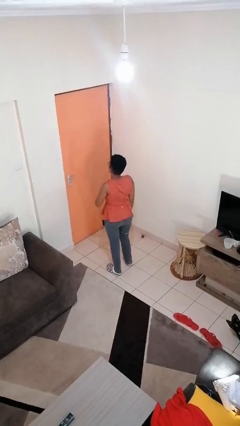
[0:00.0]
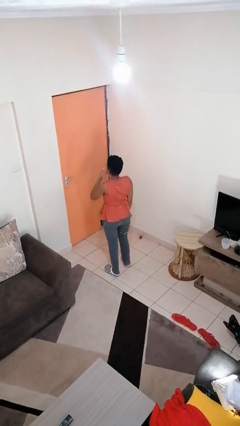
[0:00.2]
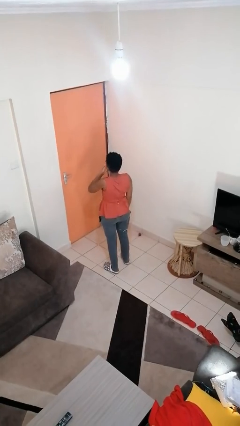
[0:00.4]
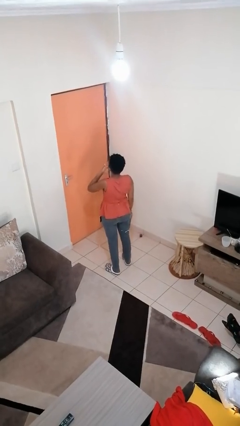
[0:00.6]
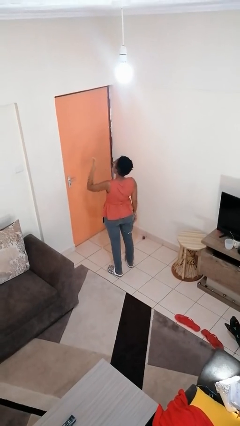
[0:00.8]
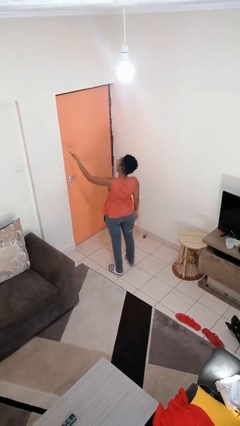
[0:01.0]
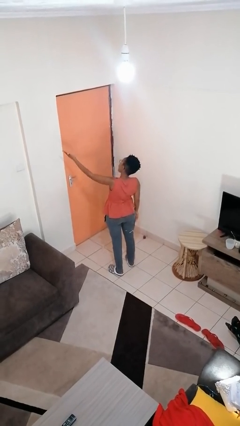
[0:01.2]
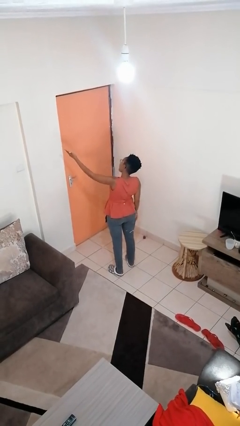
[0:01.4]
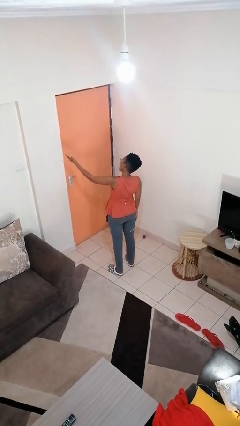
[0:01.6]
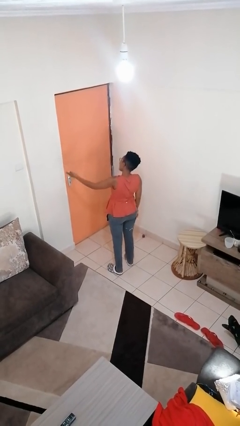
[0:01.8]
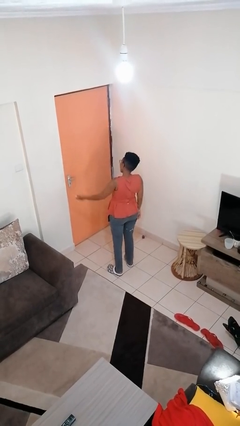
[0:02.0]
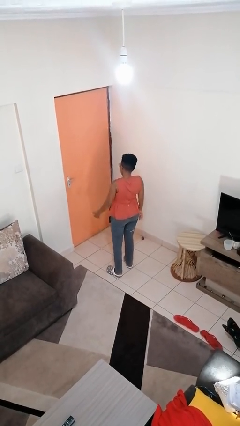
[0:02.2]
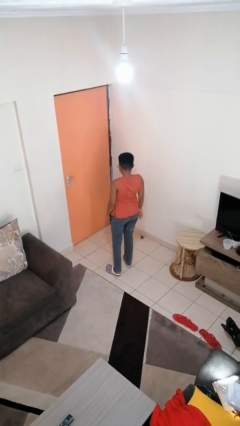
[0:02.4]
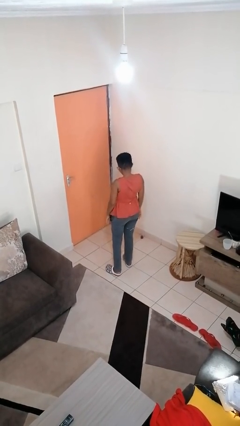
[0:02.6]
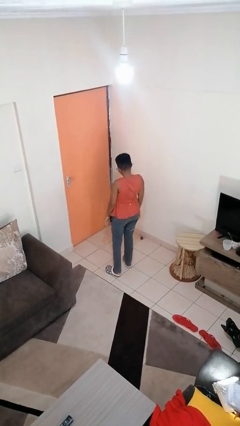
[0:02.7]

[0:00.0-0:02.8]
person gestures blow kiss

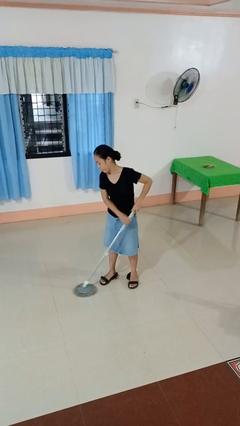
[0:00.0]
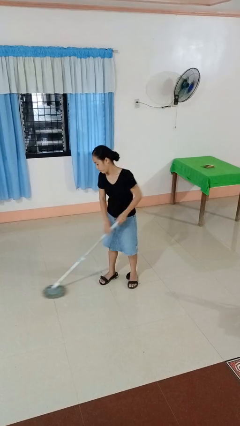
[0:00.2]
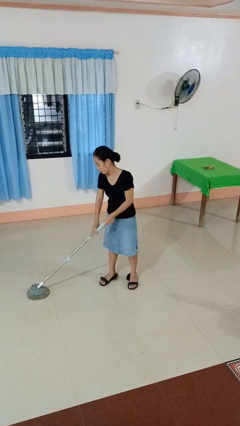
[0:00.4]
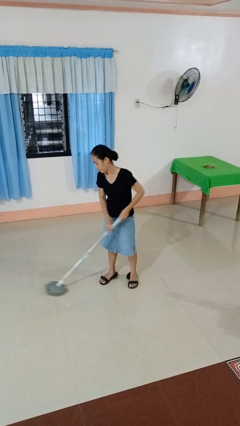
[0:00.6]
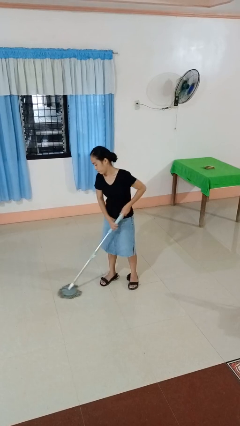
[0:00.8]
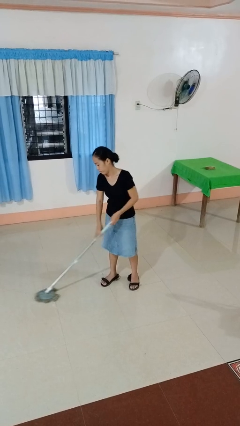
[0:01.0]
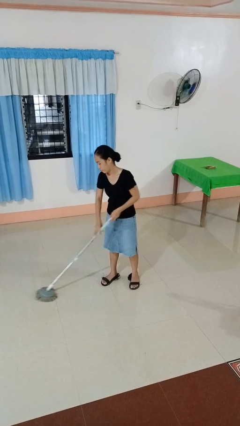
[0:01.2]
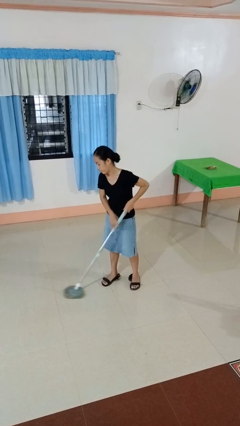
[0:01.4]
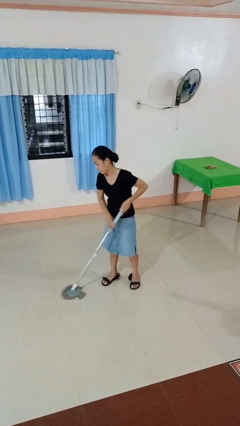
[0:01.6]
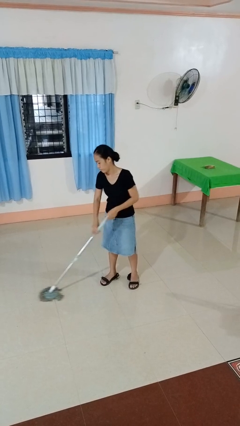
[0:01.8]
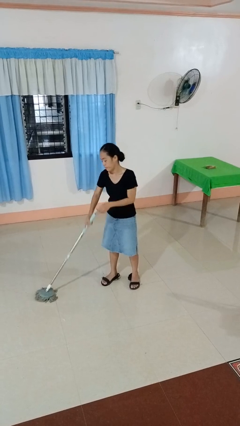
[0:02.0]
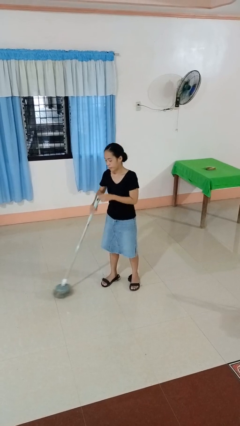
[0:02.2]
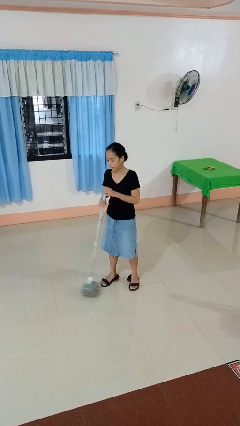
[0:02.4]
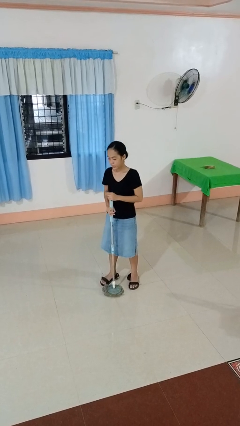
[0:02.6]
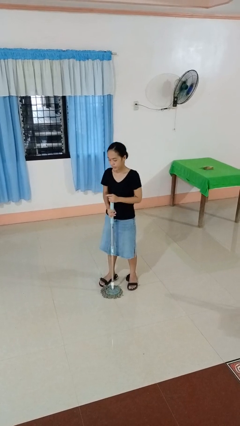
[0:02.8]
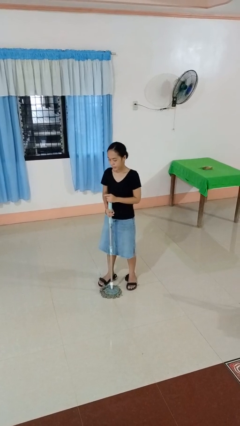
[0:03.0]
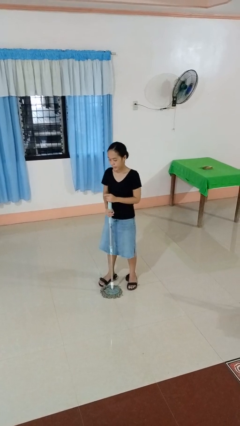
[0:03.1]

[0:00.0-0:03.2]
person mops

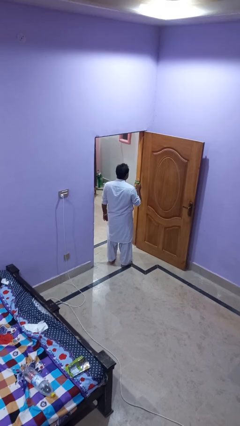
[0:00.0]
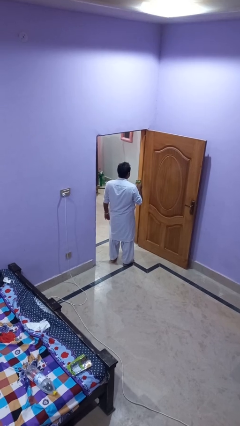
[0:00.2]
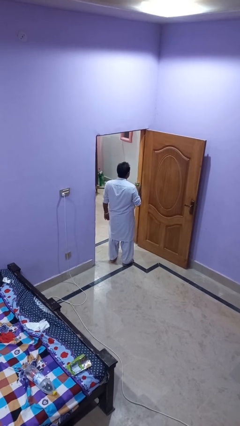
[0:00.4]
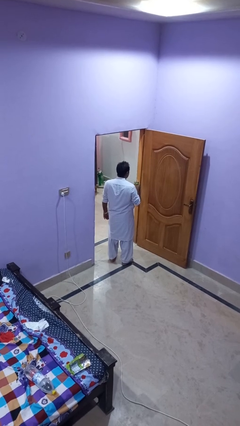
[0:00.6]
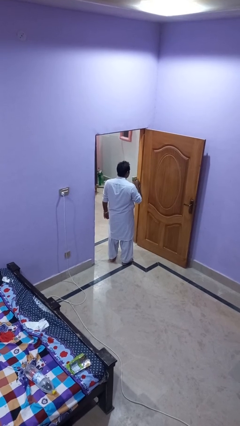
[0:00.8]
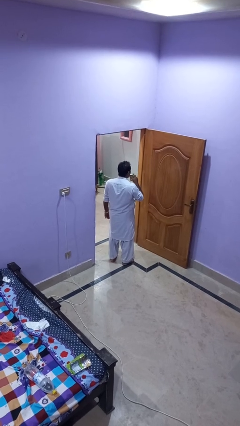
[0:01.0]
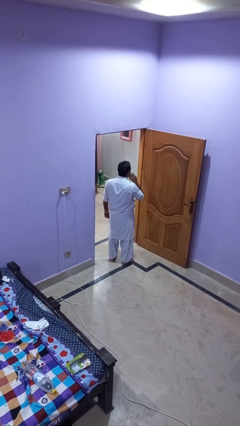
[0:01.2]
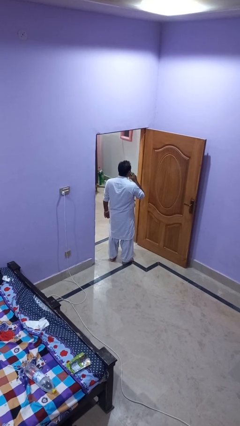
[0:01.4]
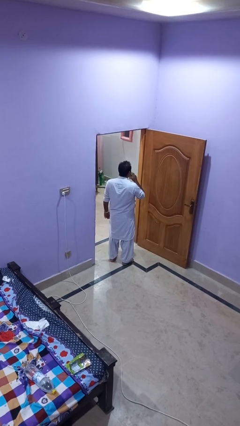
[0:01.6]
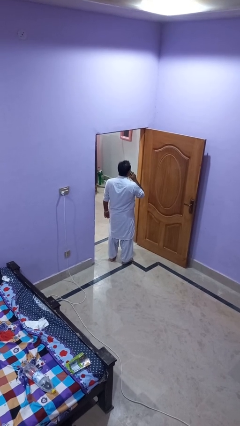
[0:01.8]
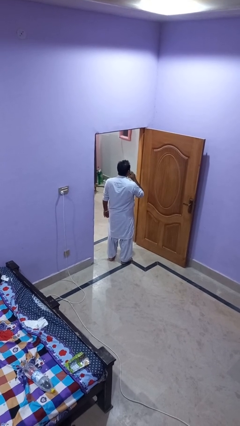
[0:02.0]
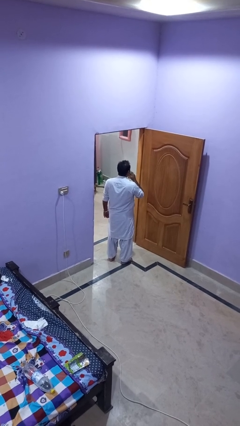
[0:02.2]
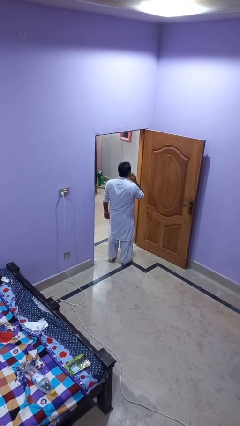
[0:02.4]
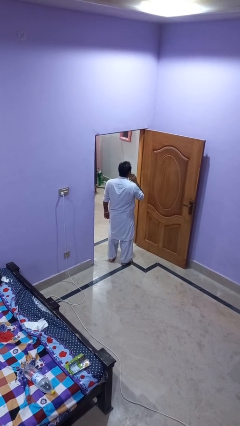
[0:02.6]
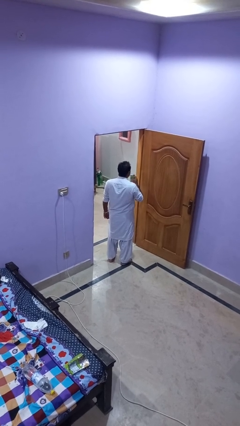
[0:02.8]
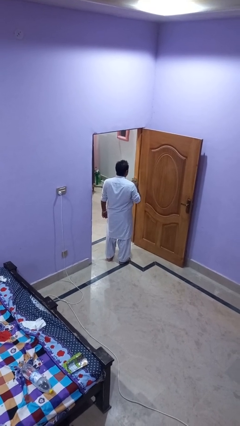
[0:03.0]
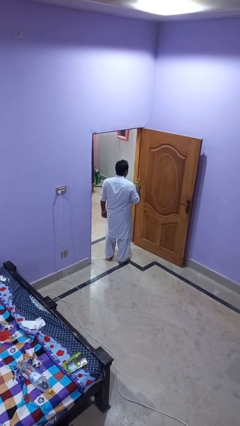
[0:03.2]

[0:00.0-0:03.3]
person drinks from straw

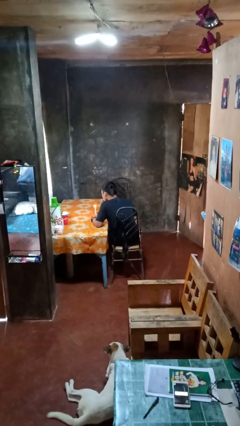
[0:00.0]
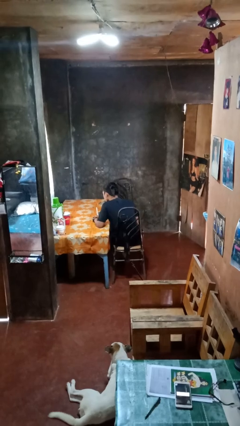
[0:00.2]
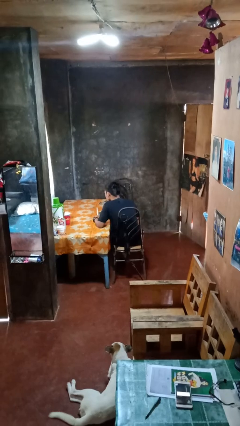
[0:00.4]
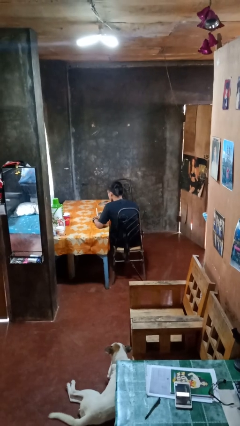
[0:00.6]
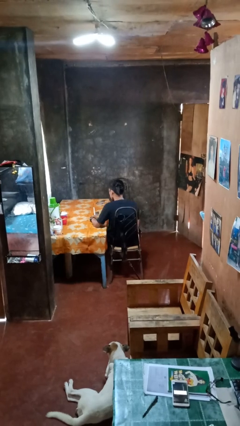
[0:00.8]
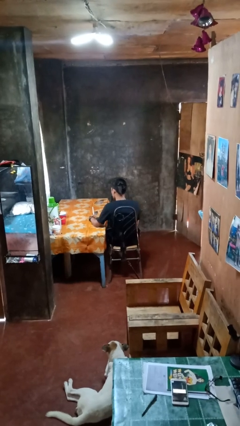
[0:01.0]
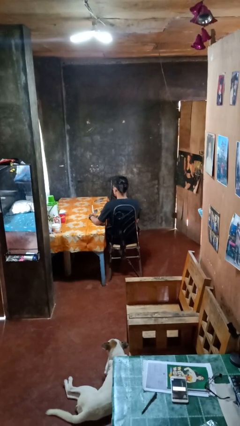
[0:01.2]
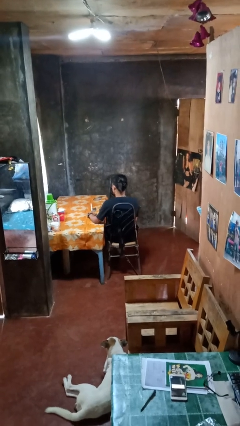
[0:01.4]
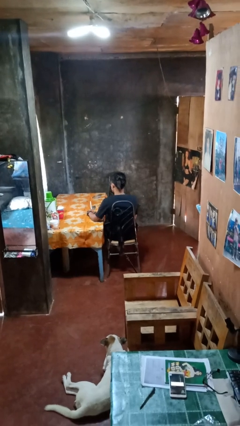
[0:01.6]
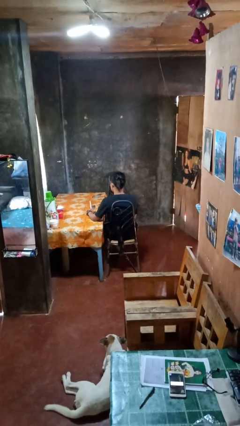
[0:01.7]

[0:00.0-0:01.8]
person extinguishes candle

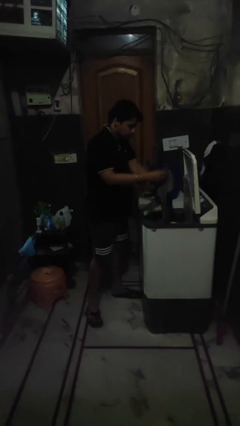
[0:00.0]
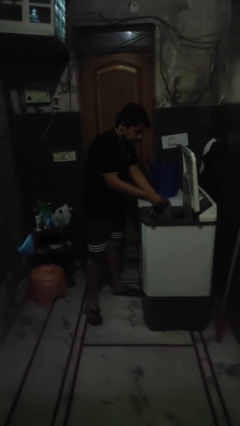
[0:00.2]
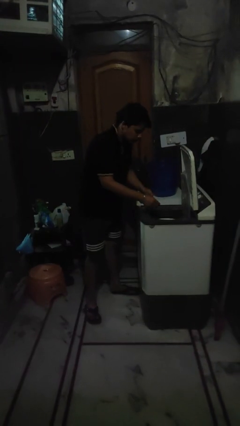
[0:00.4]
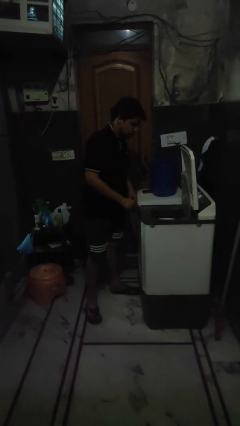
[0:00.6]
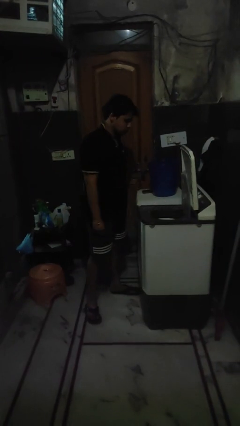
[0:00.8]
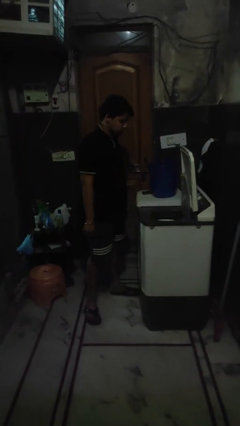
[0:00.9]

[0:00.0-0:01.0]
person loads clotheswasher

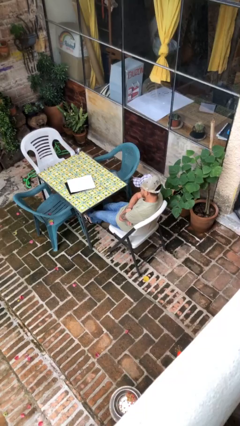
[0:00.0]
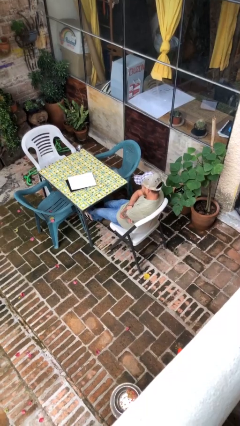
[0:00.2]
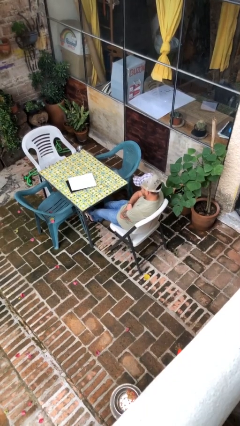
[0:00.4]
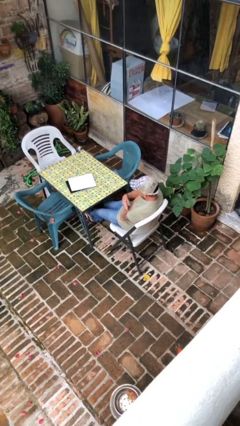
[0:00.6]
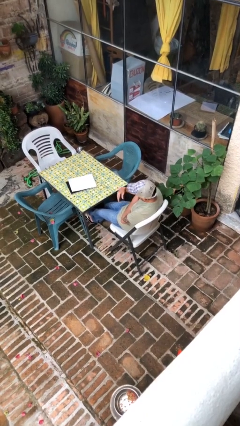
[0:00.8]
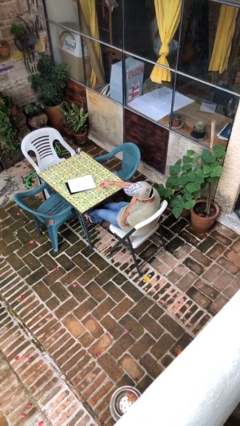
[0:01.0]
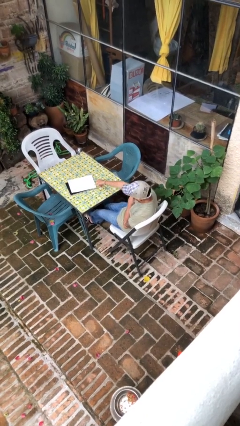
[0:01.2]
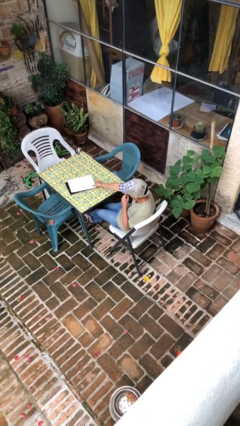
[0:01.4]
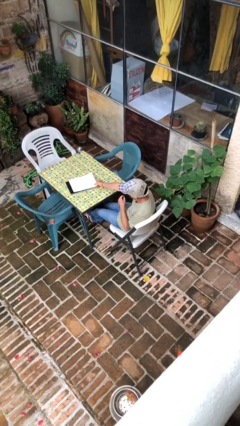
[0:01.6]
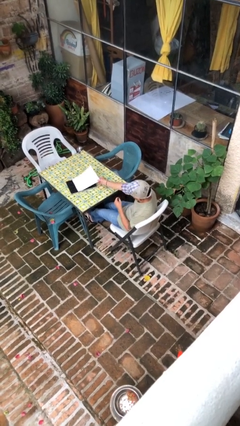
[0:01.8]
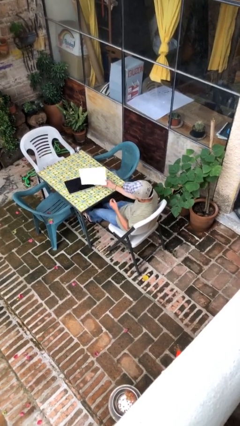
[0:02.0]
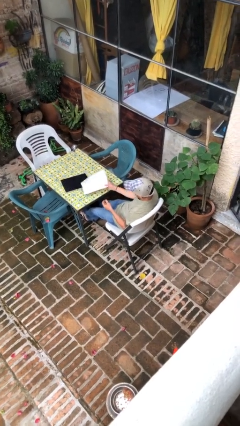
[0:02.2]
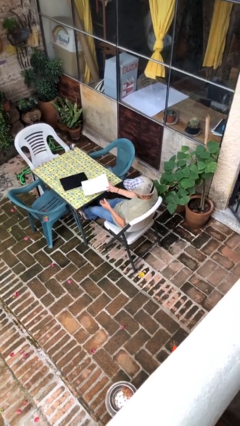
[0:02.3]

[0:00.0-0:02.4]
person picks up object from table

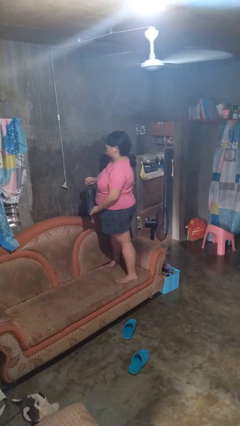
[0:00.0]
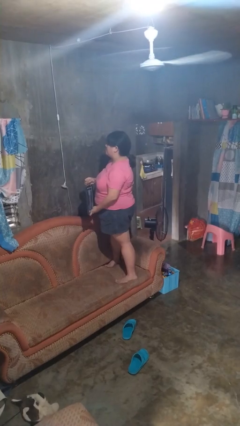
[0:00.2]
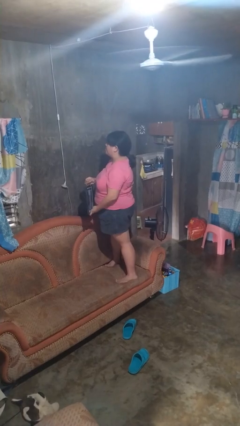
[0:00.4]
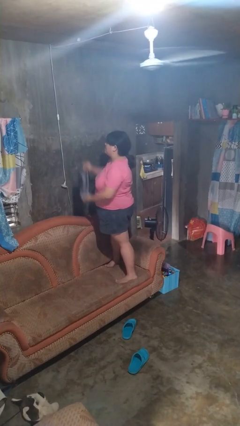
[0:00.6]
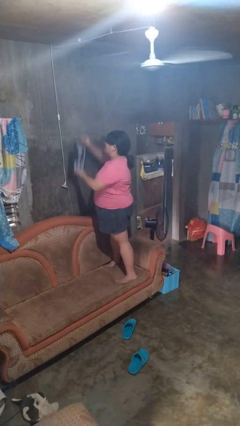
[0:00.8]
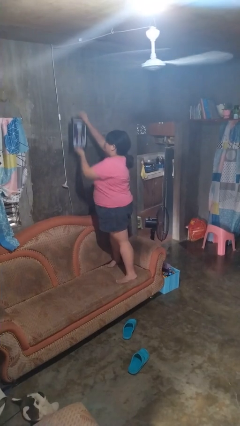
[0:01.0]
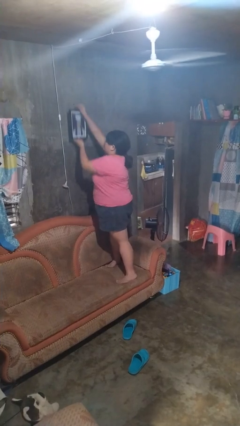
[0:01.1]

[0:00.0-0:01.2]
person puts up picture frame

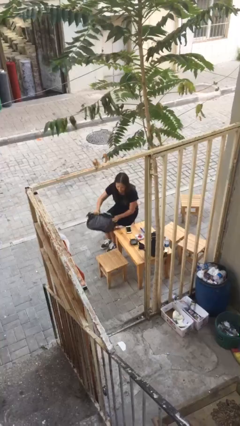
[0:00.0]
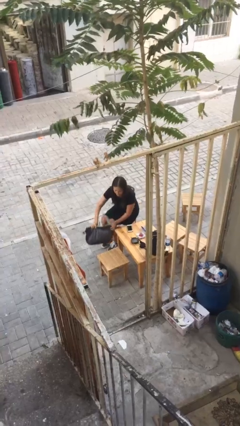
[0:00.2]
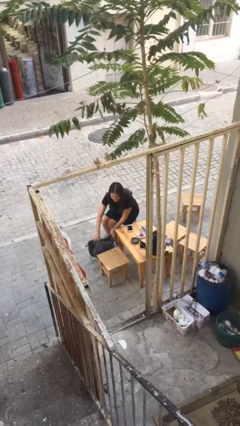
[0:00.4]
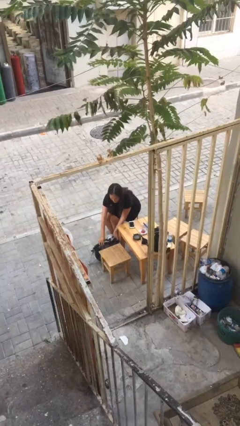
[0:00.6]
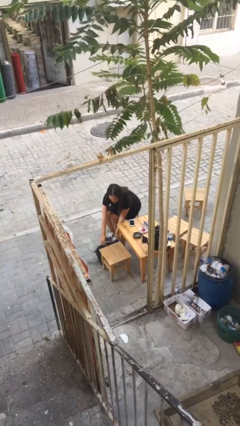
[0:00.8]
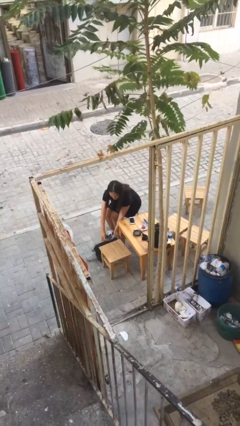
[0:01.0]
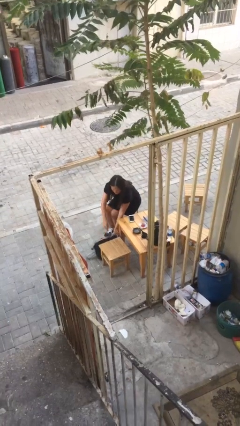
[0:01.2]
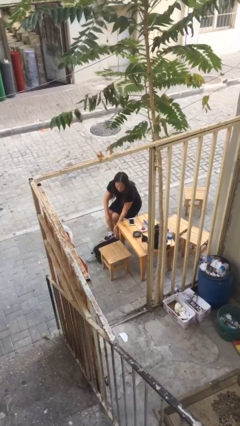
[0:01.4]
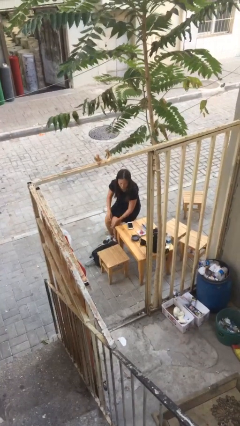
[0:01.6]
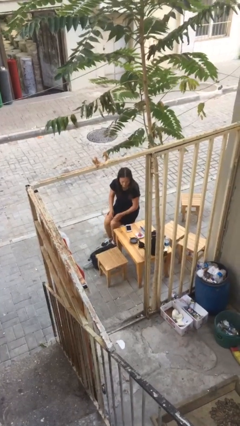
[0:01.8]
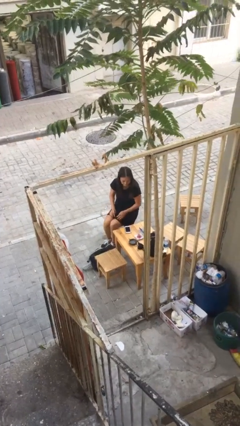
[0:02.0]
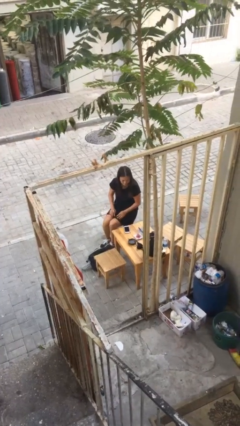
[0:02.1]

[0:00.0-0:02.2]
person puts down object on floor
